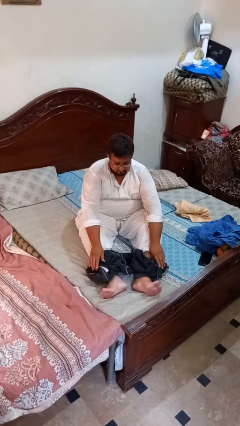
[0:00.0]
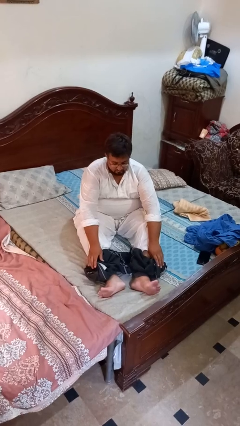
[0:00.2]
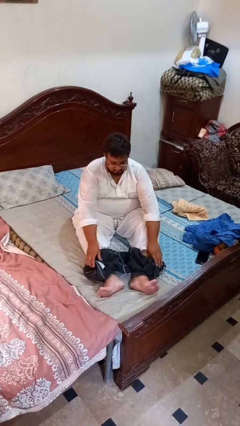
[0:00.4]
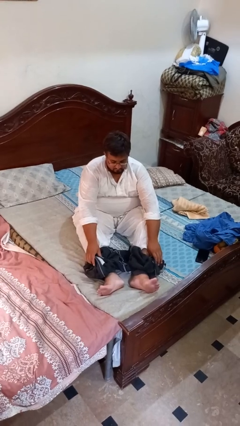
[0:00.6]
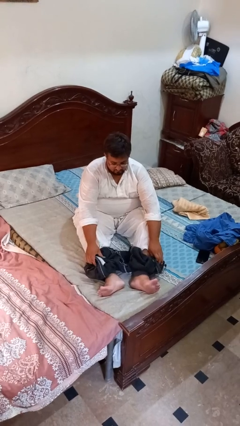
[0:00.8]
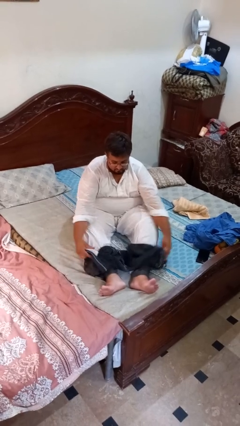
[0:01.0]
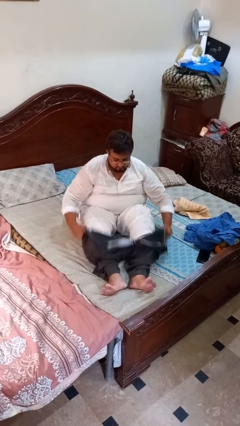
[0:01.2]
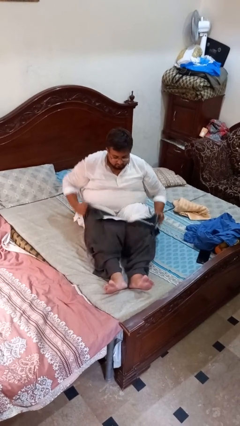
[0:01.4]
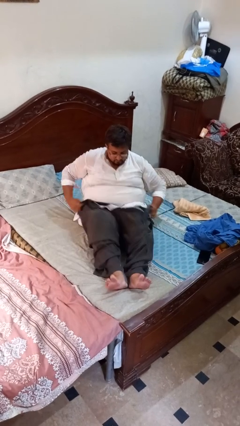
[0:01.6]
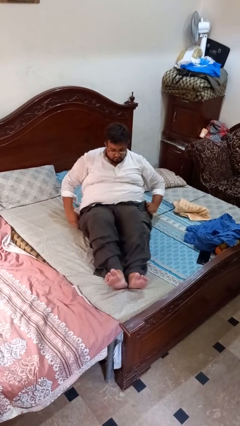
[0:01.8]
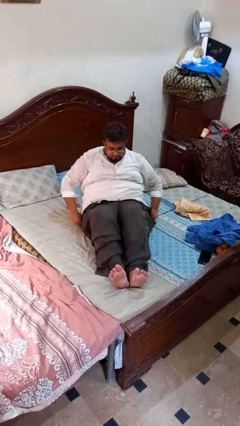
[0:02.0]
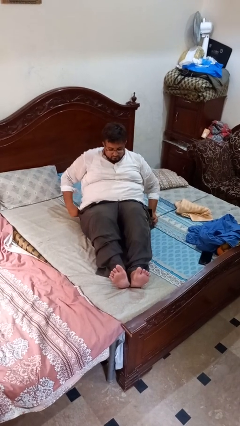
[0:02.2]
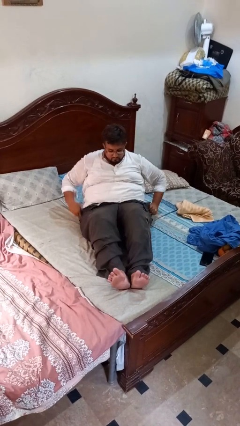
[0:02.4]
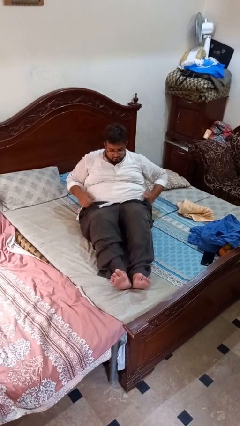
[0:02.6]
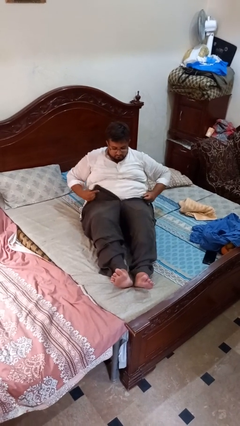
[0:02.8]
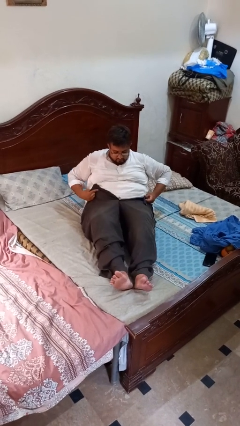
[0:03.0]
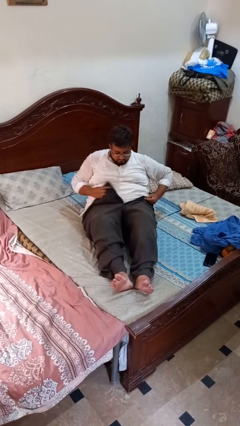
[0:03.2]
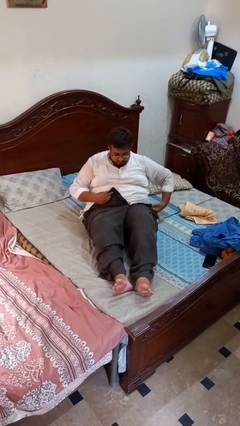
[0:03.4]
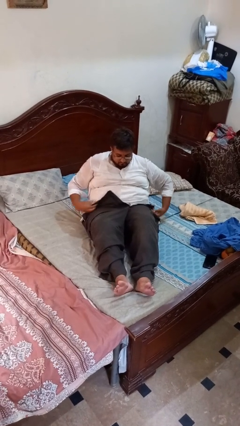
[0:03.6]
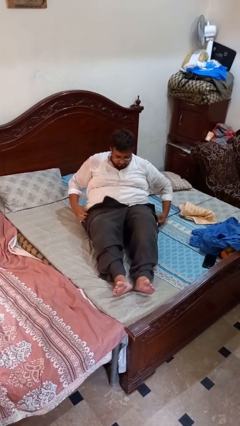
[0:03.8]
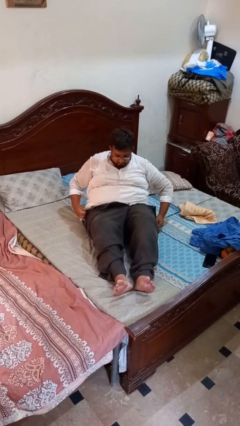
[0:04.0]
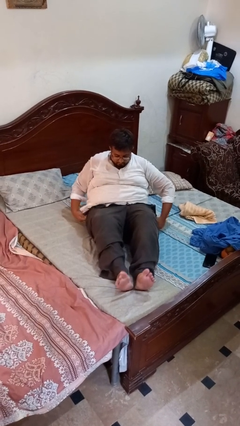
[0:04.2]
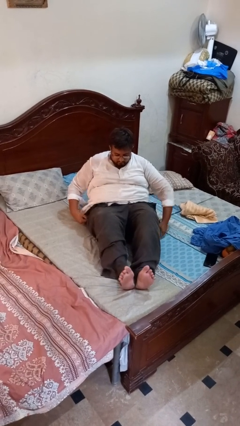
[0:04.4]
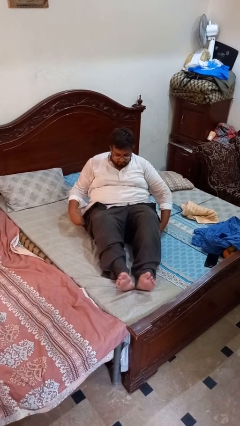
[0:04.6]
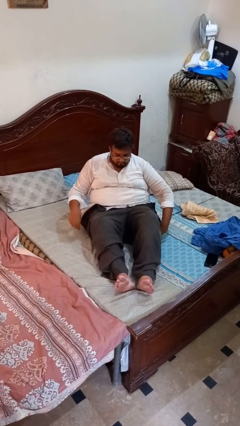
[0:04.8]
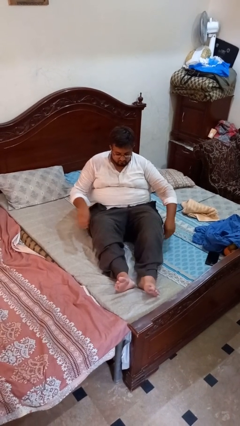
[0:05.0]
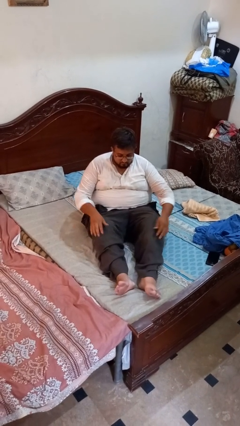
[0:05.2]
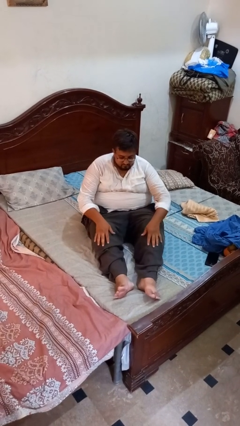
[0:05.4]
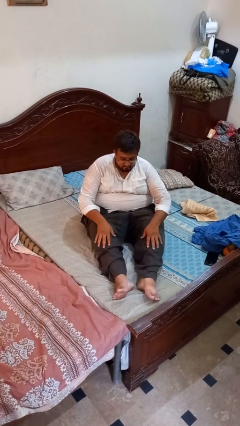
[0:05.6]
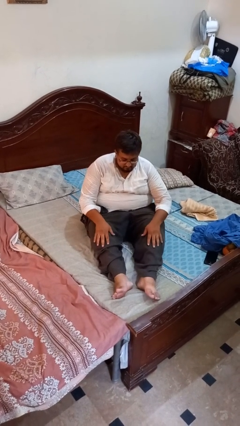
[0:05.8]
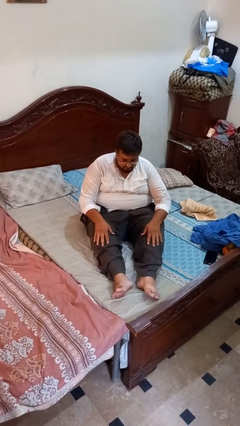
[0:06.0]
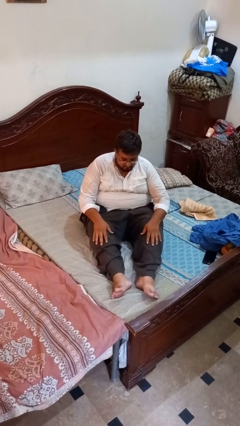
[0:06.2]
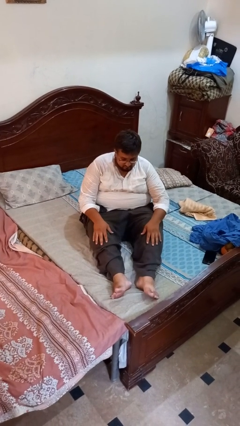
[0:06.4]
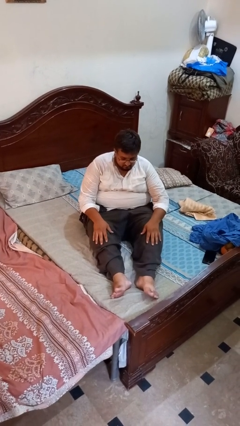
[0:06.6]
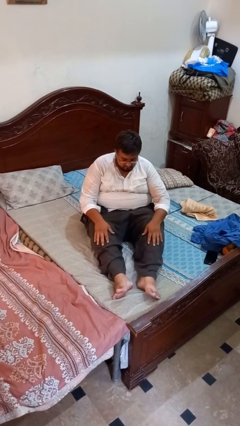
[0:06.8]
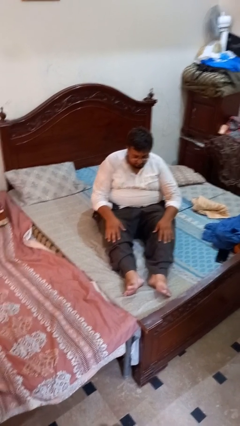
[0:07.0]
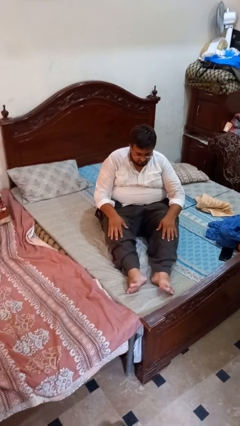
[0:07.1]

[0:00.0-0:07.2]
person puts on pants

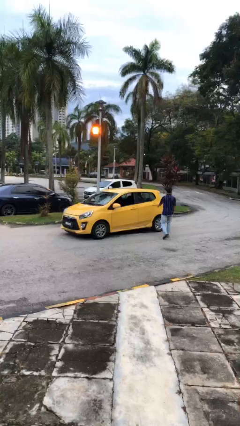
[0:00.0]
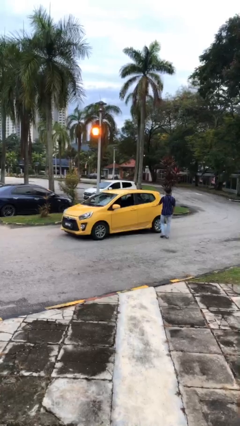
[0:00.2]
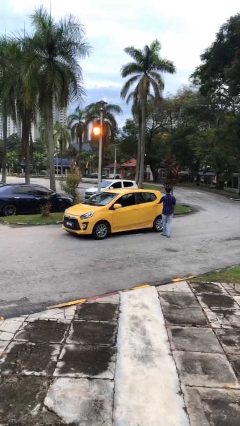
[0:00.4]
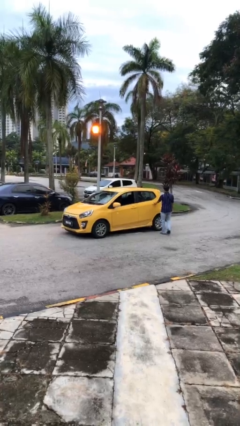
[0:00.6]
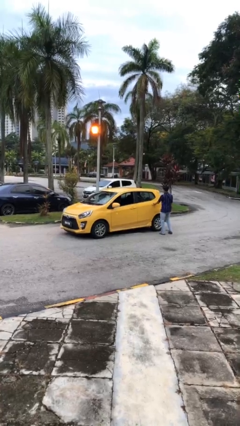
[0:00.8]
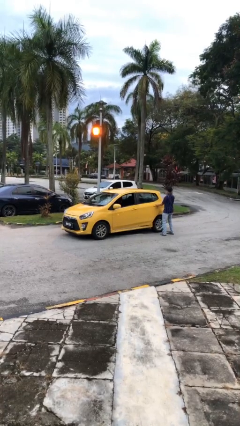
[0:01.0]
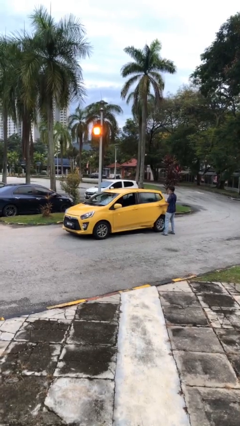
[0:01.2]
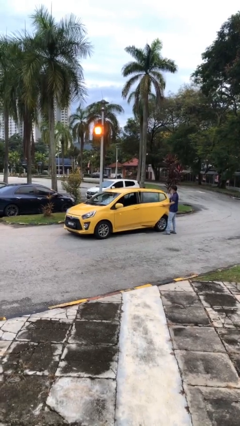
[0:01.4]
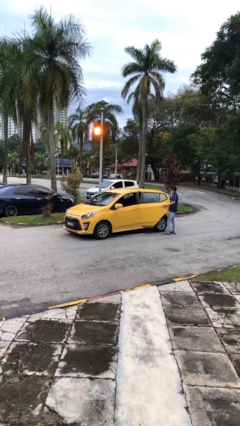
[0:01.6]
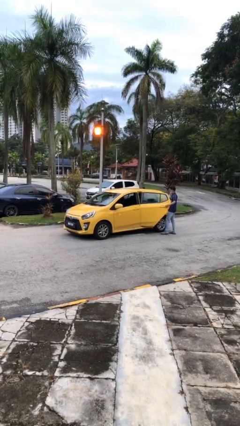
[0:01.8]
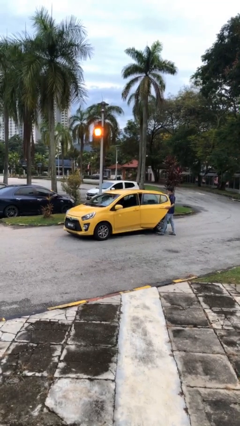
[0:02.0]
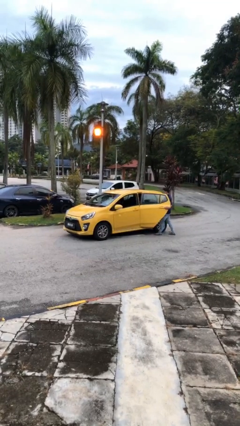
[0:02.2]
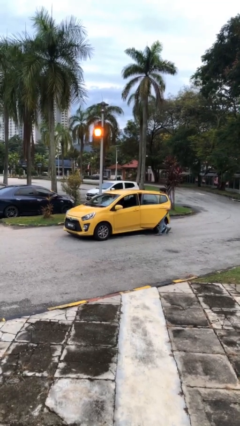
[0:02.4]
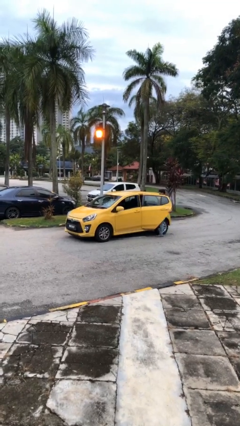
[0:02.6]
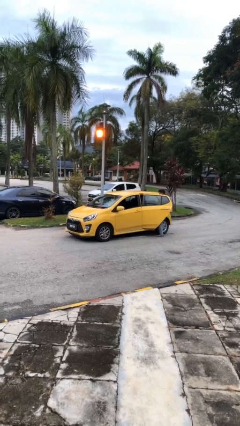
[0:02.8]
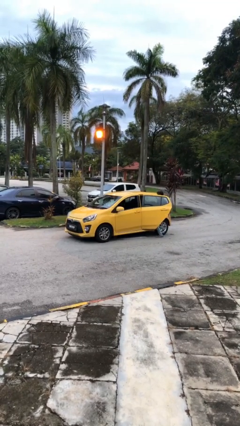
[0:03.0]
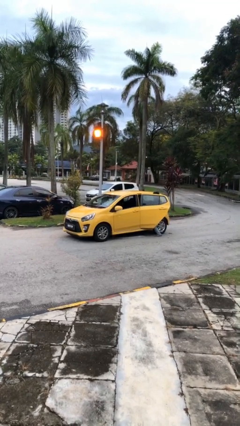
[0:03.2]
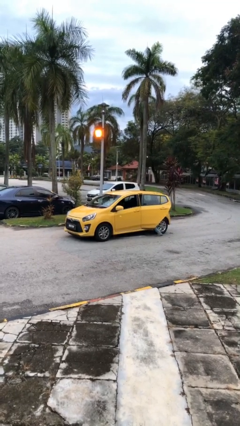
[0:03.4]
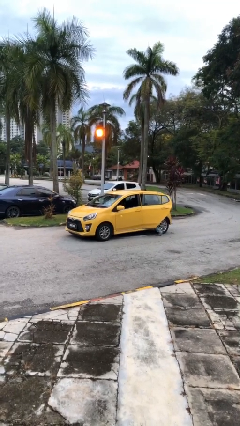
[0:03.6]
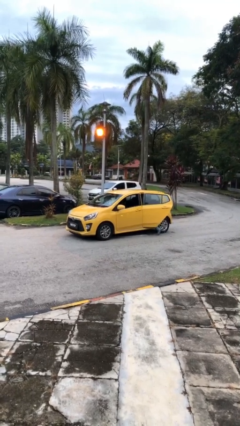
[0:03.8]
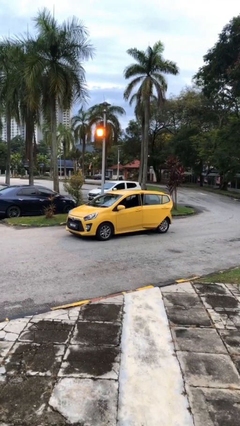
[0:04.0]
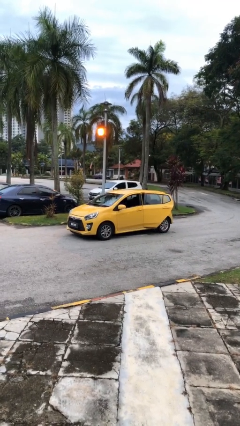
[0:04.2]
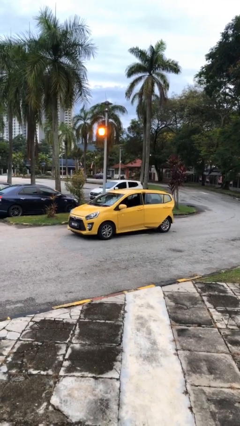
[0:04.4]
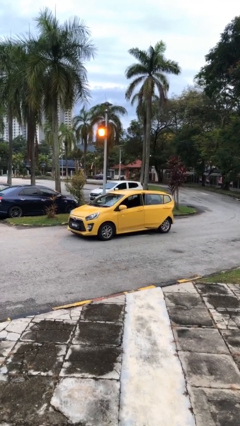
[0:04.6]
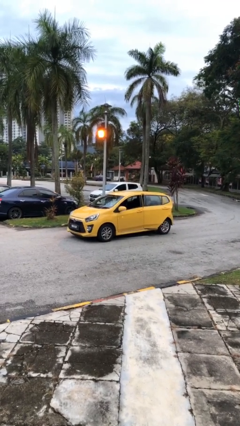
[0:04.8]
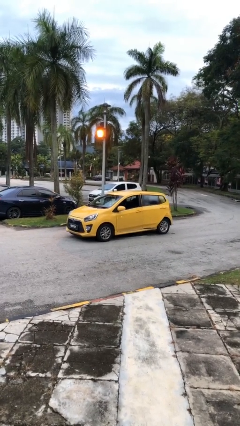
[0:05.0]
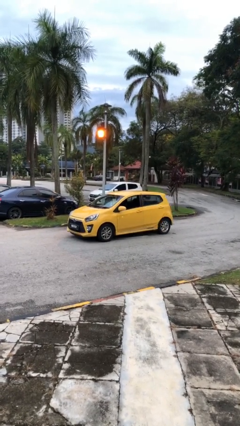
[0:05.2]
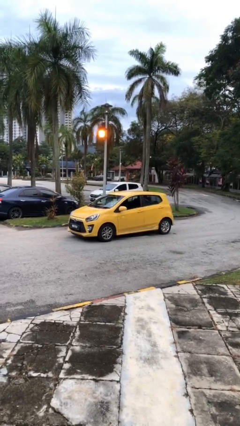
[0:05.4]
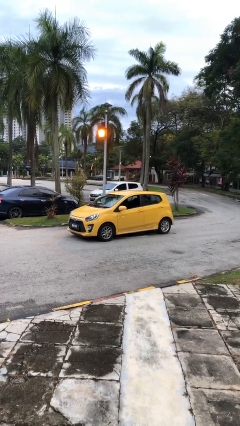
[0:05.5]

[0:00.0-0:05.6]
car picks up person

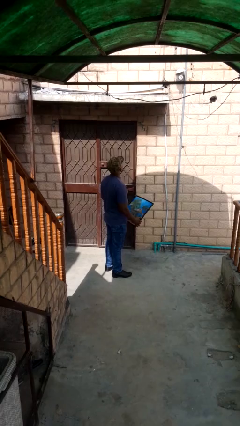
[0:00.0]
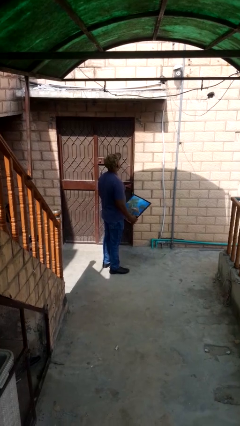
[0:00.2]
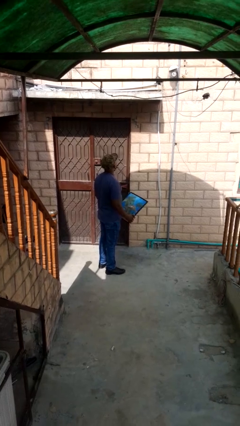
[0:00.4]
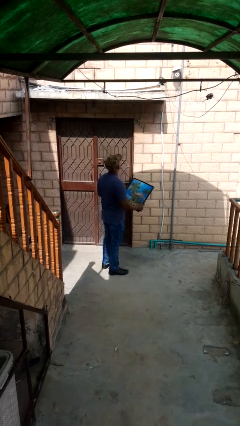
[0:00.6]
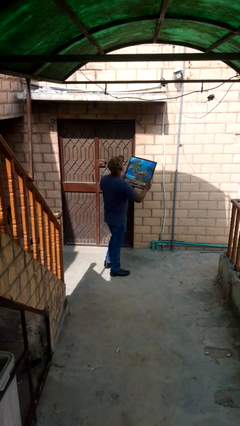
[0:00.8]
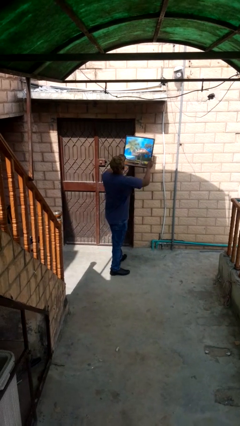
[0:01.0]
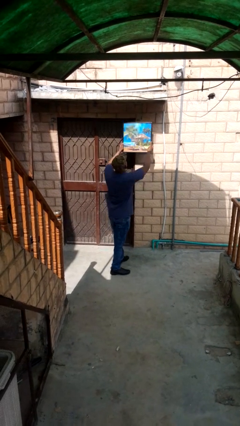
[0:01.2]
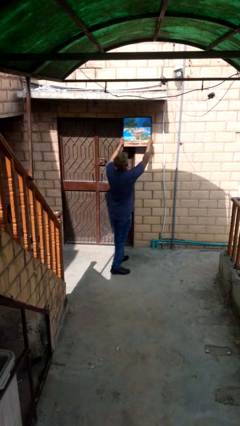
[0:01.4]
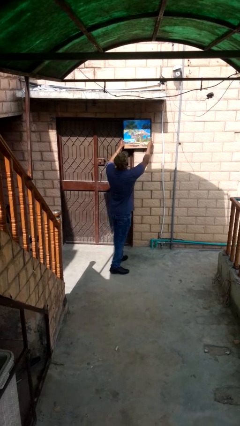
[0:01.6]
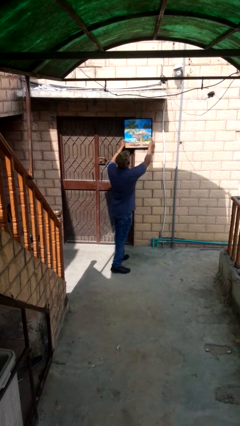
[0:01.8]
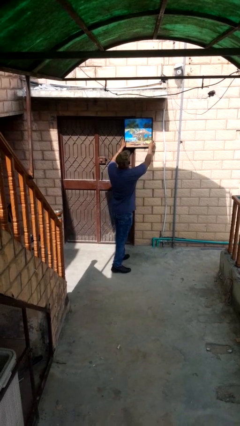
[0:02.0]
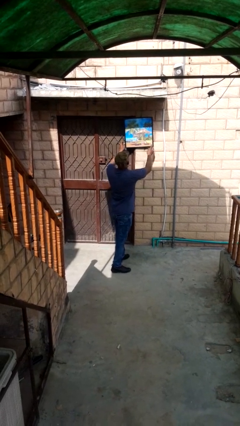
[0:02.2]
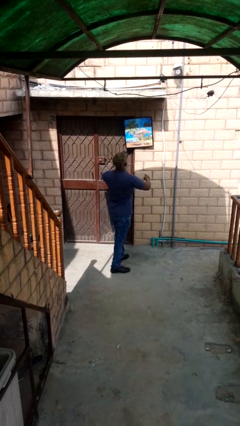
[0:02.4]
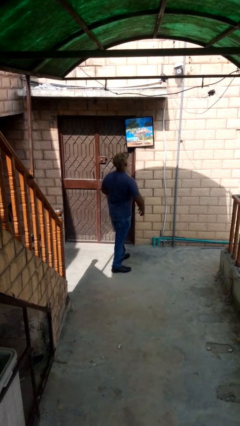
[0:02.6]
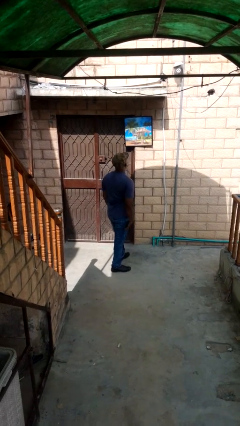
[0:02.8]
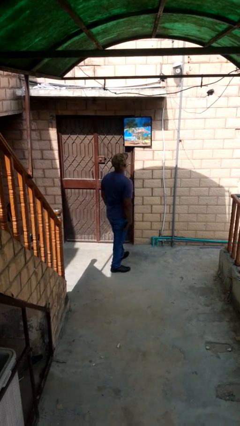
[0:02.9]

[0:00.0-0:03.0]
person puts up picture frame

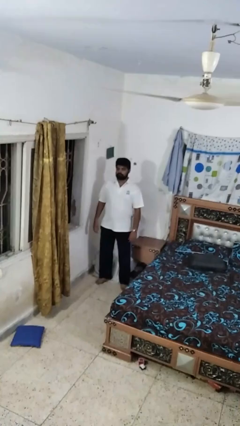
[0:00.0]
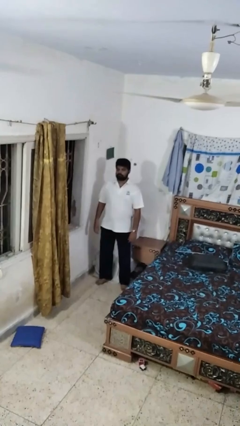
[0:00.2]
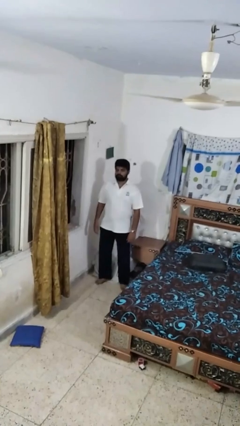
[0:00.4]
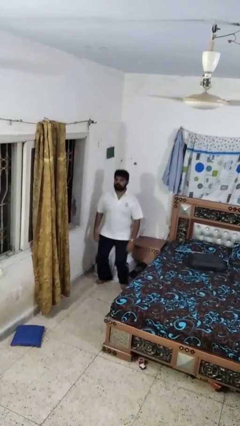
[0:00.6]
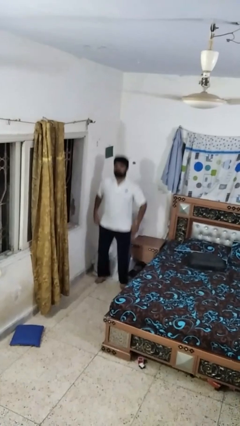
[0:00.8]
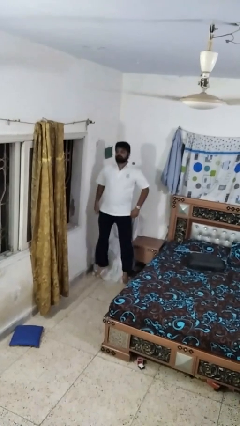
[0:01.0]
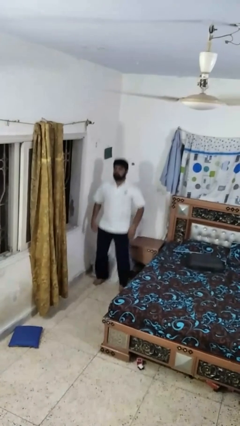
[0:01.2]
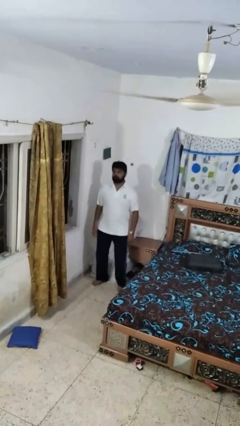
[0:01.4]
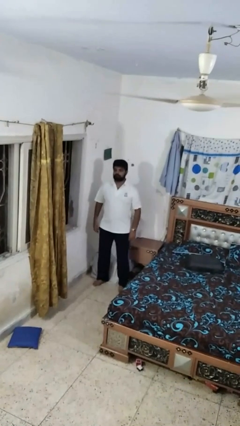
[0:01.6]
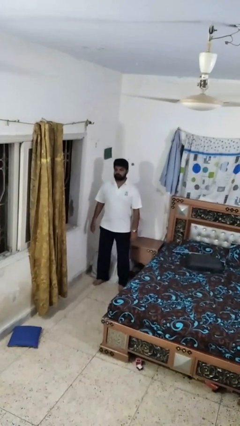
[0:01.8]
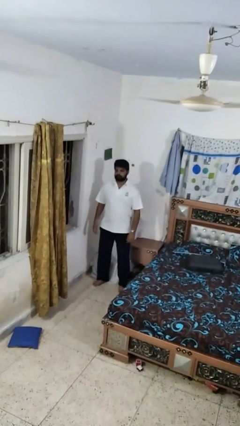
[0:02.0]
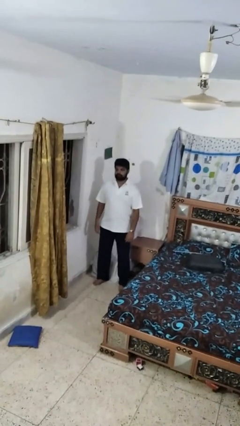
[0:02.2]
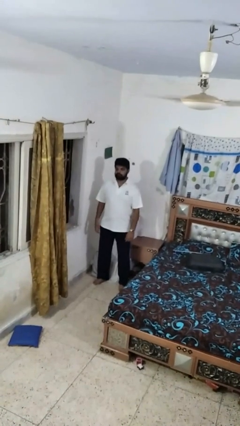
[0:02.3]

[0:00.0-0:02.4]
person jumps
